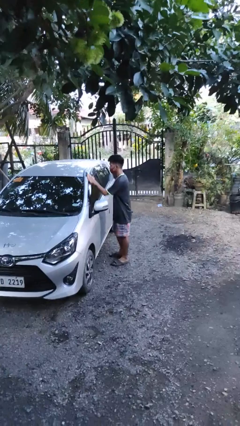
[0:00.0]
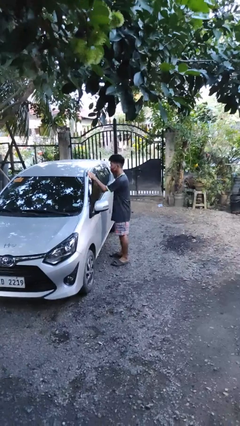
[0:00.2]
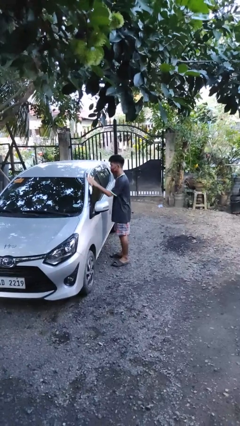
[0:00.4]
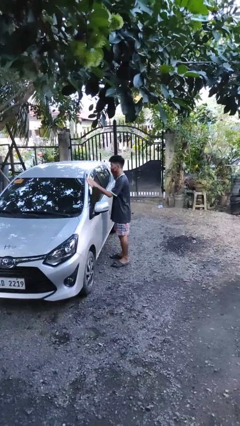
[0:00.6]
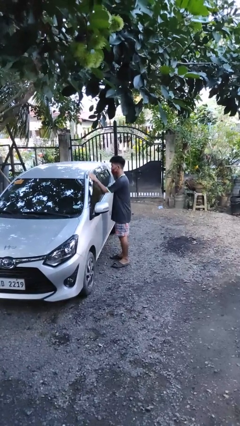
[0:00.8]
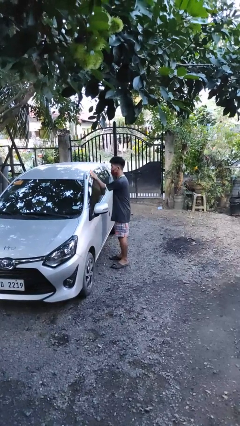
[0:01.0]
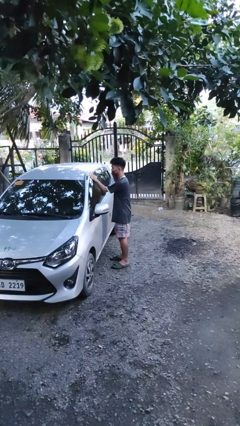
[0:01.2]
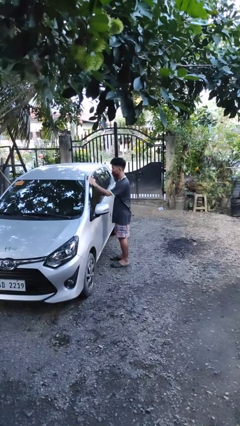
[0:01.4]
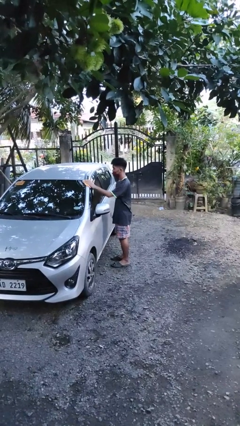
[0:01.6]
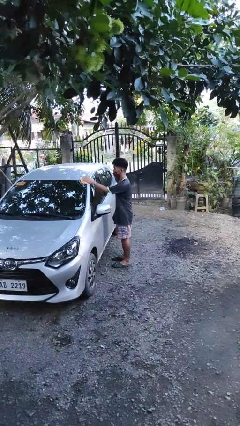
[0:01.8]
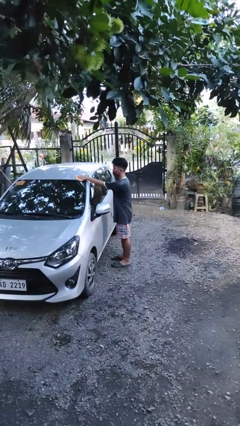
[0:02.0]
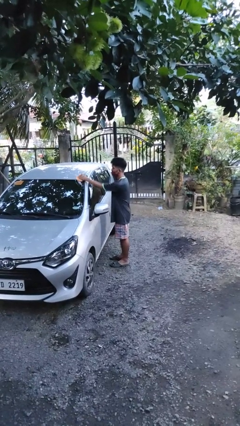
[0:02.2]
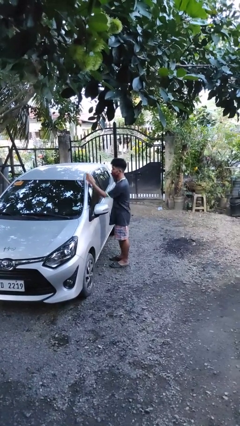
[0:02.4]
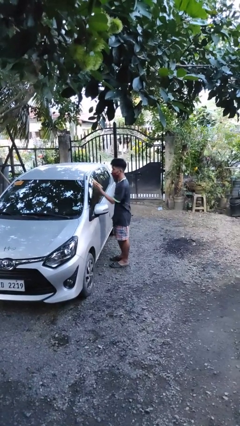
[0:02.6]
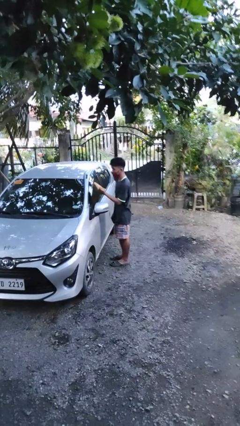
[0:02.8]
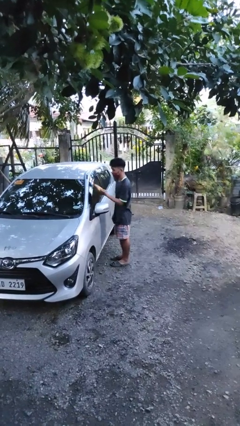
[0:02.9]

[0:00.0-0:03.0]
person polishes car with rag

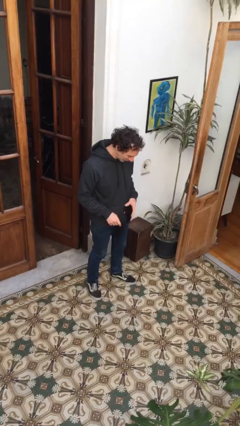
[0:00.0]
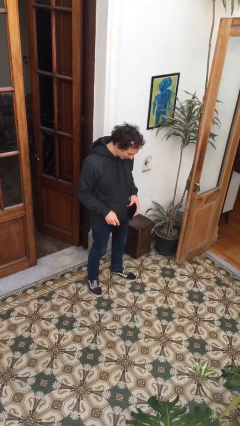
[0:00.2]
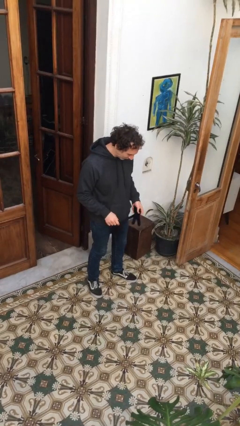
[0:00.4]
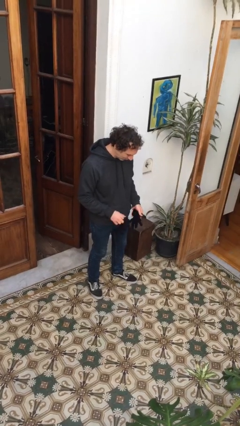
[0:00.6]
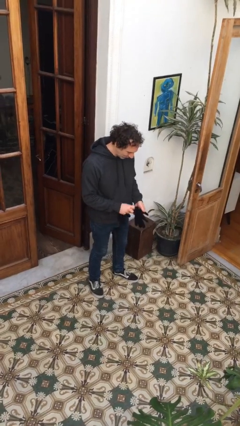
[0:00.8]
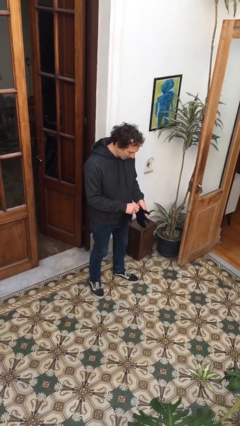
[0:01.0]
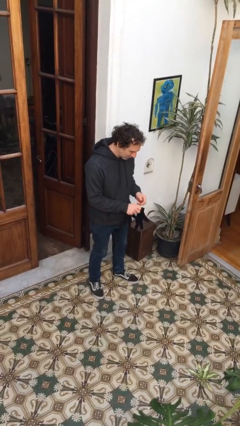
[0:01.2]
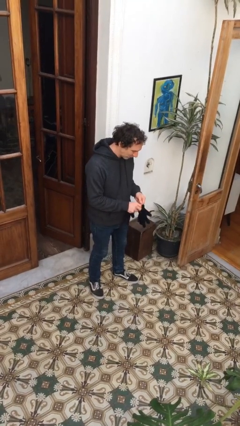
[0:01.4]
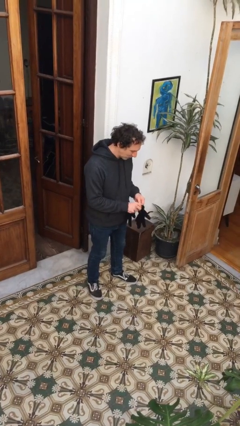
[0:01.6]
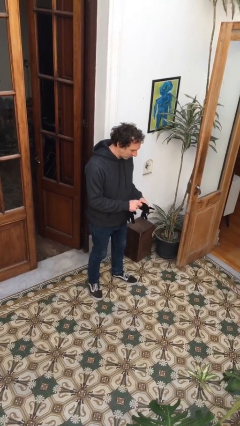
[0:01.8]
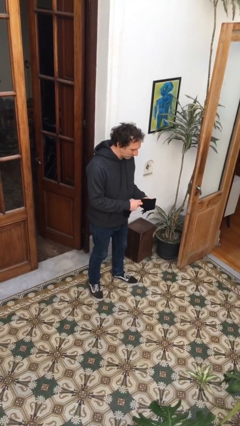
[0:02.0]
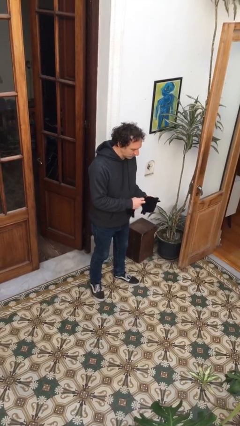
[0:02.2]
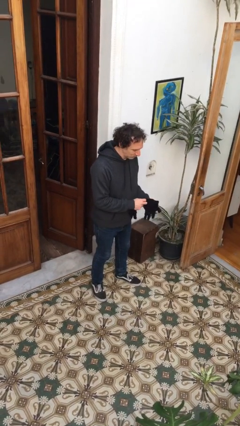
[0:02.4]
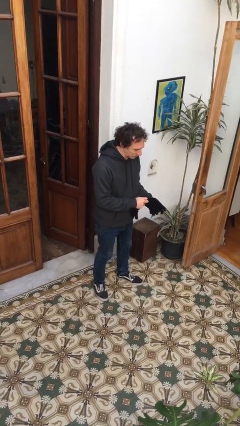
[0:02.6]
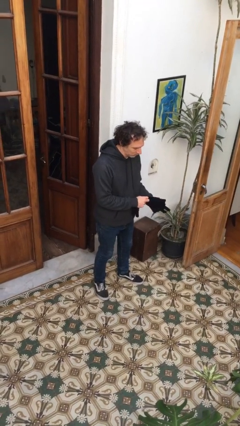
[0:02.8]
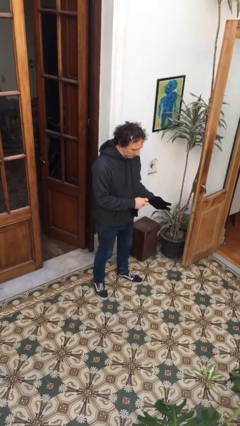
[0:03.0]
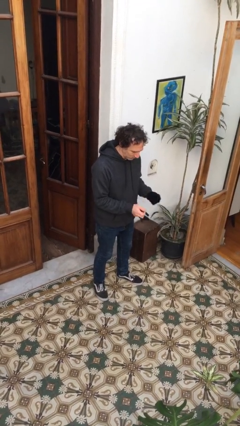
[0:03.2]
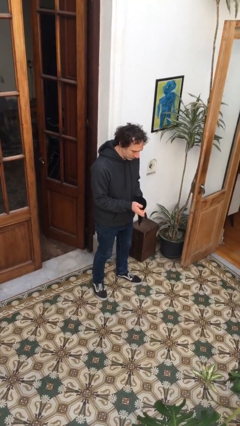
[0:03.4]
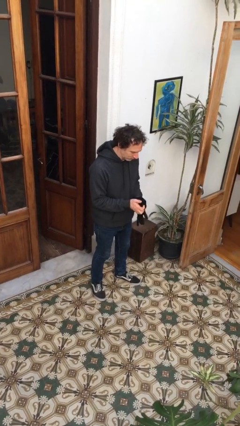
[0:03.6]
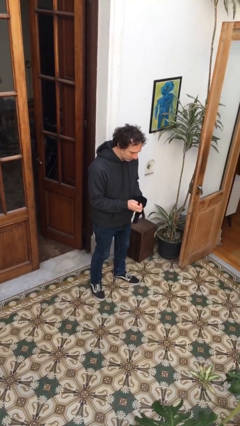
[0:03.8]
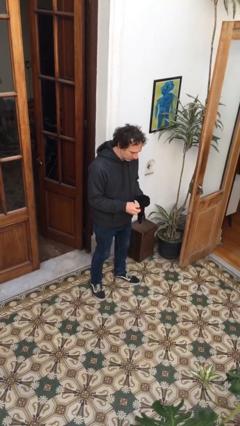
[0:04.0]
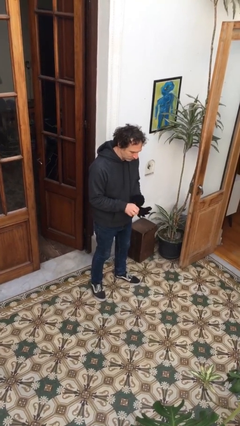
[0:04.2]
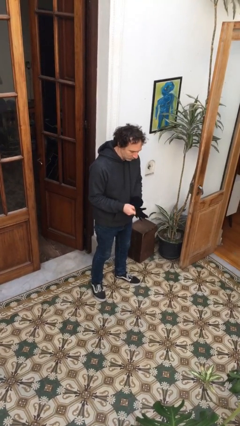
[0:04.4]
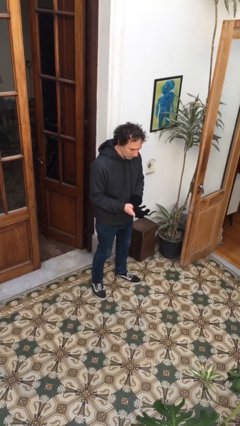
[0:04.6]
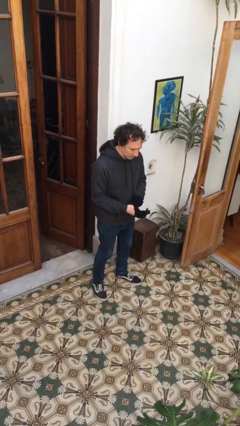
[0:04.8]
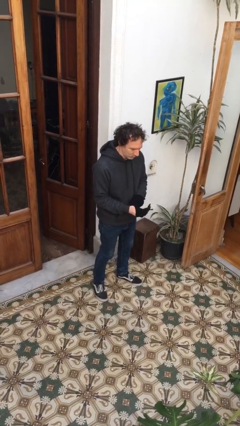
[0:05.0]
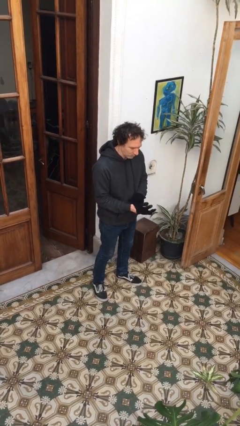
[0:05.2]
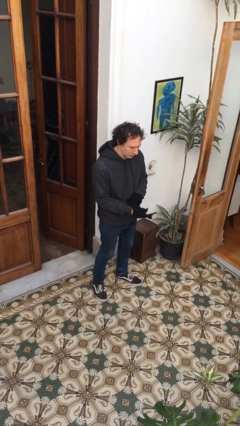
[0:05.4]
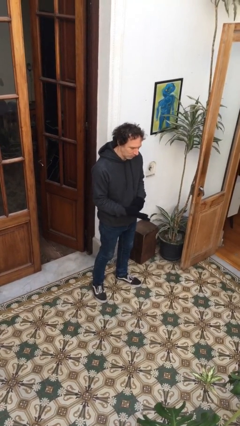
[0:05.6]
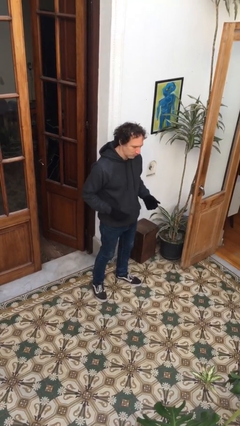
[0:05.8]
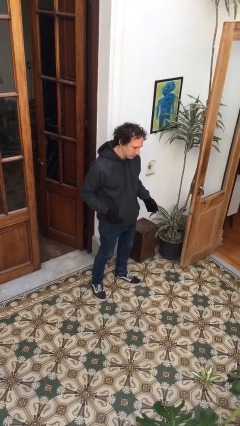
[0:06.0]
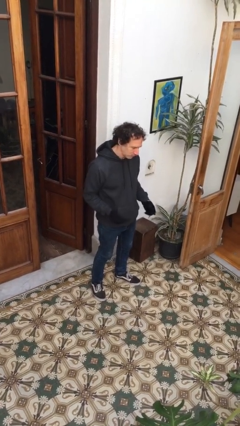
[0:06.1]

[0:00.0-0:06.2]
person puts on gloves

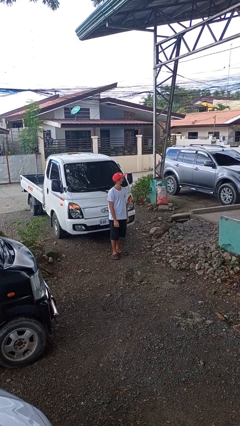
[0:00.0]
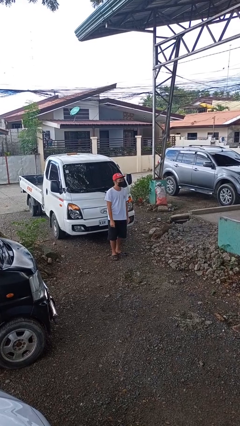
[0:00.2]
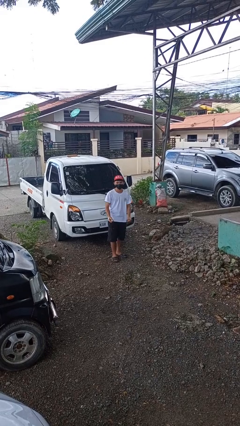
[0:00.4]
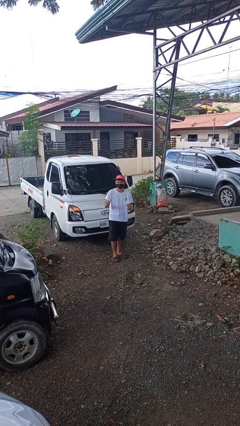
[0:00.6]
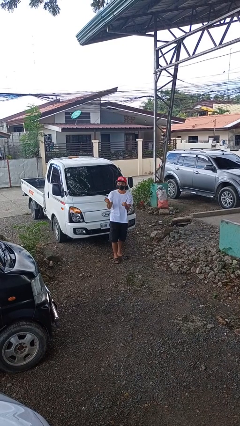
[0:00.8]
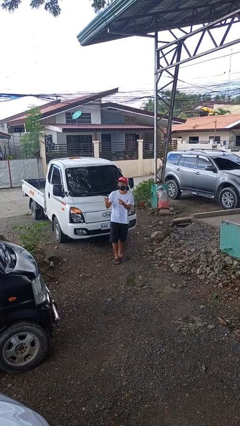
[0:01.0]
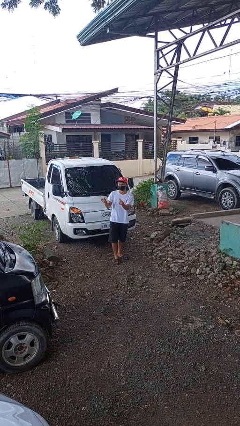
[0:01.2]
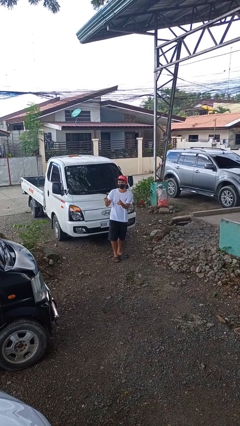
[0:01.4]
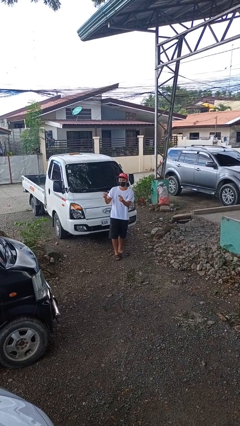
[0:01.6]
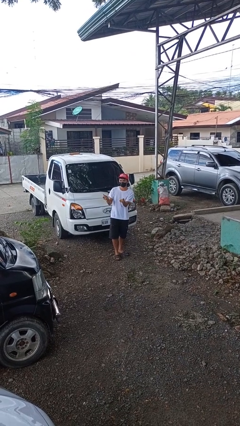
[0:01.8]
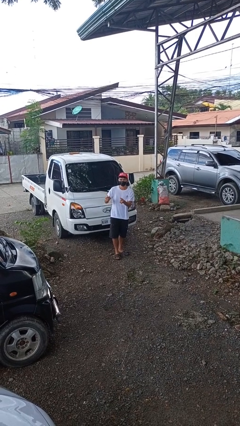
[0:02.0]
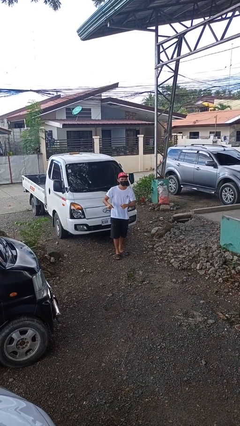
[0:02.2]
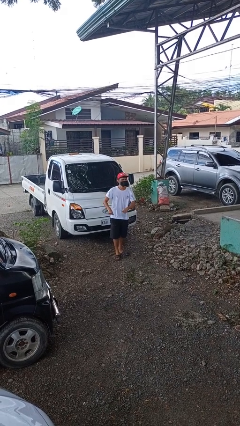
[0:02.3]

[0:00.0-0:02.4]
person snaps fingers

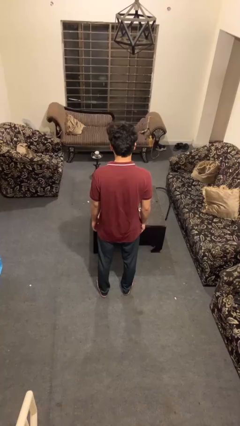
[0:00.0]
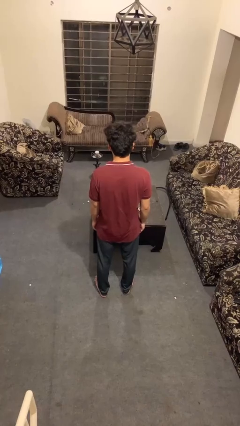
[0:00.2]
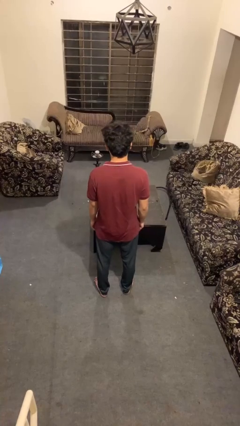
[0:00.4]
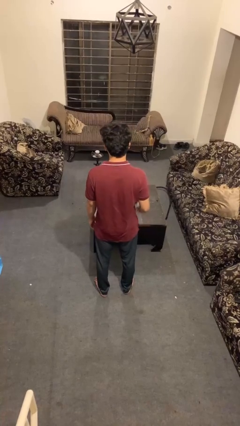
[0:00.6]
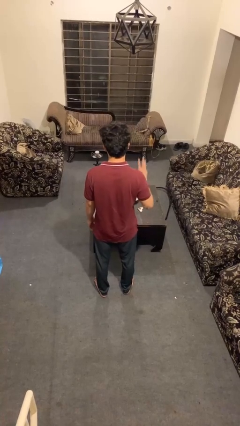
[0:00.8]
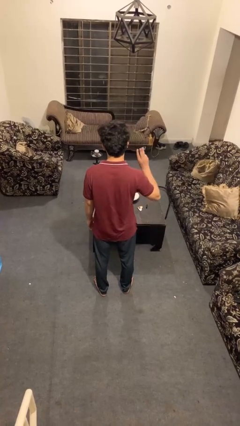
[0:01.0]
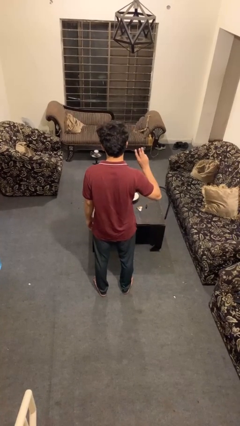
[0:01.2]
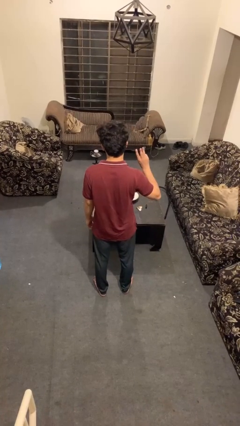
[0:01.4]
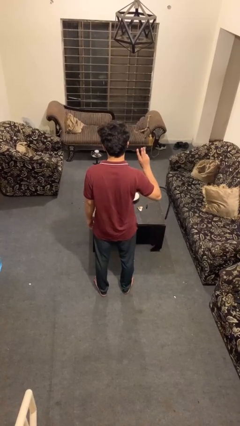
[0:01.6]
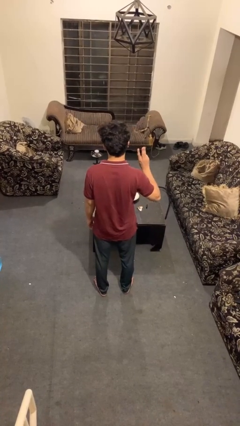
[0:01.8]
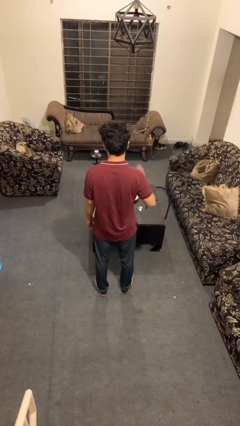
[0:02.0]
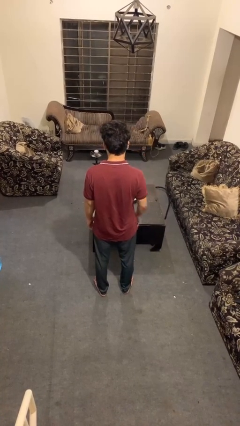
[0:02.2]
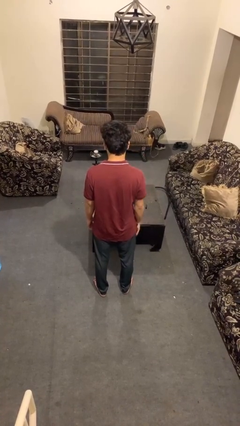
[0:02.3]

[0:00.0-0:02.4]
person gestures number three

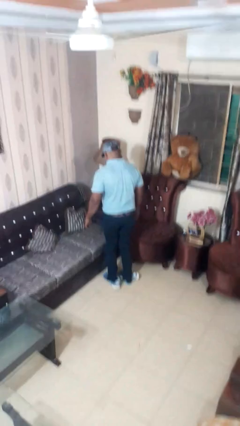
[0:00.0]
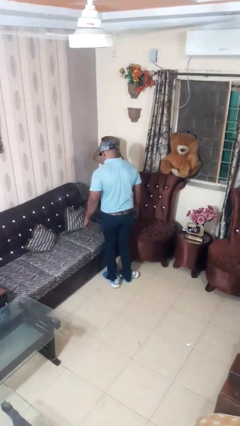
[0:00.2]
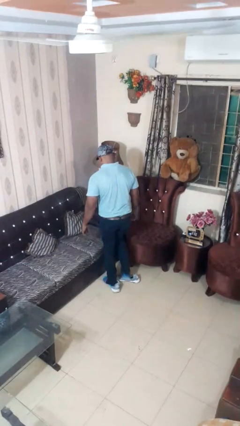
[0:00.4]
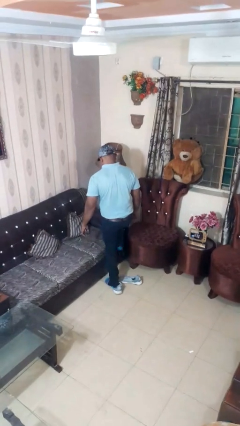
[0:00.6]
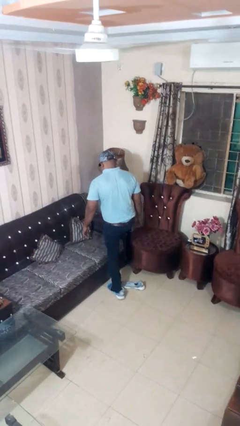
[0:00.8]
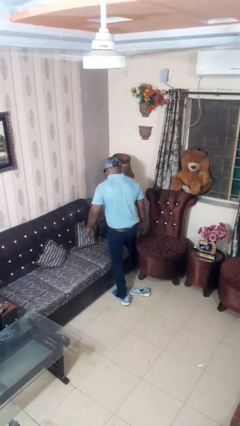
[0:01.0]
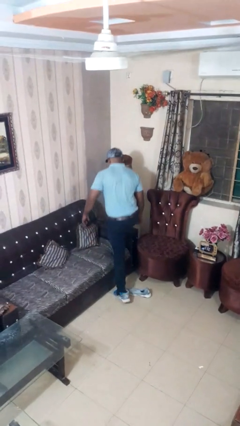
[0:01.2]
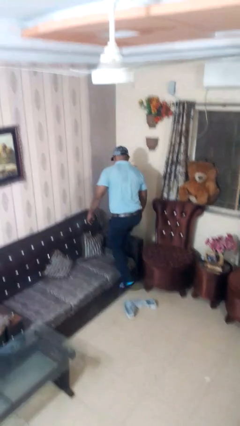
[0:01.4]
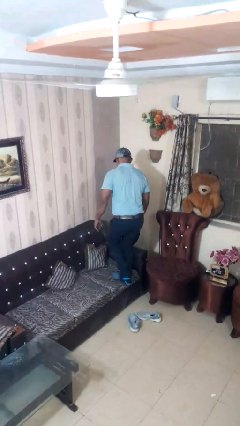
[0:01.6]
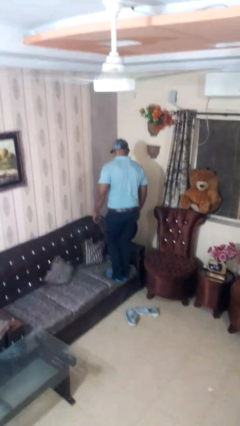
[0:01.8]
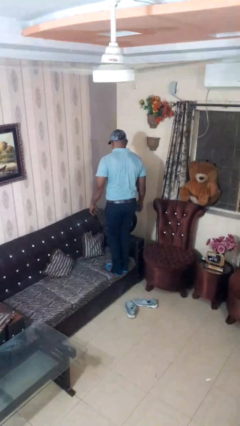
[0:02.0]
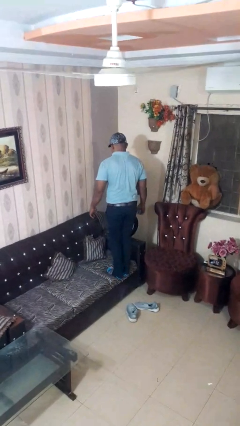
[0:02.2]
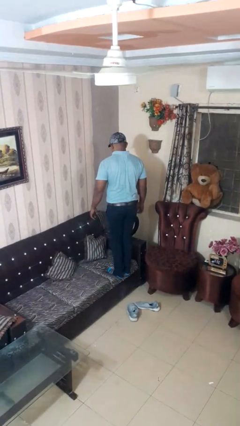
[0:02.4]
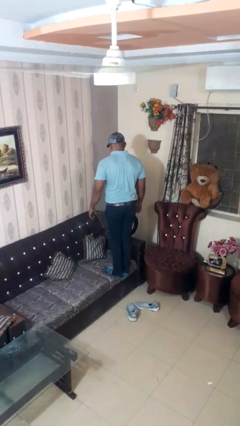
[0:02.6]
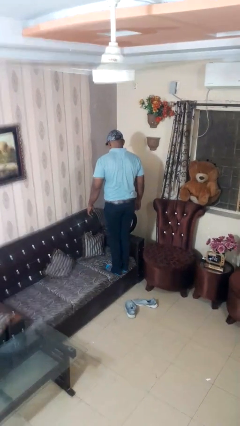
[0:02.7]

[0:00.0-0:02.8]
person climbs on couch

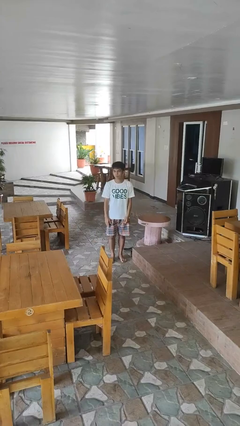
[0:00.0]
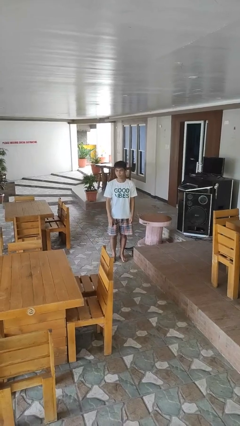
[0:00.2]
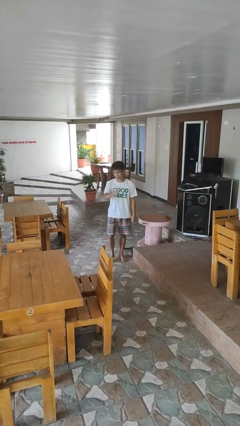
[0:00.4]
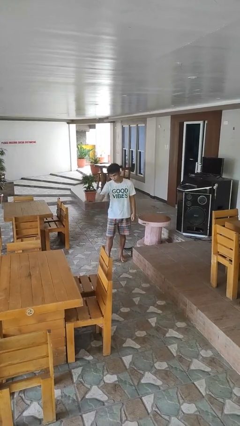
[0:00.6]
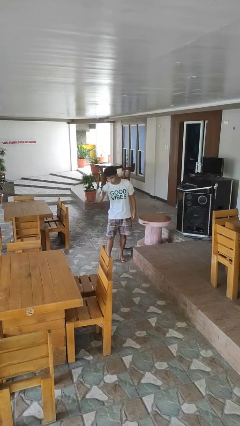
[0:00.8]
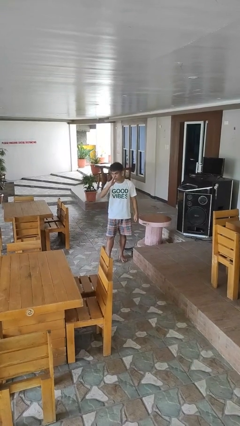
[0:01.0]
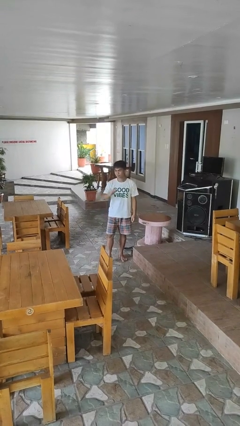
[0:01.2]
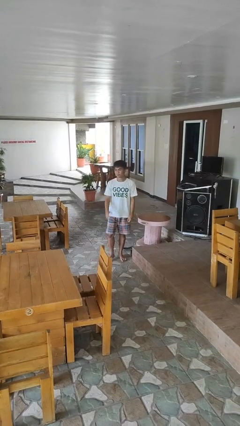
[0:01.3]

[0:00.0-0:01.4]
person karate chop
